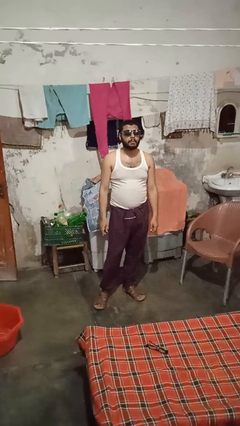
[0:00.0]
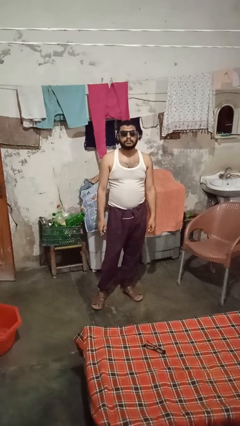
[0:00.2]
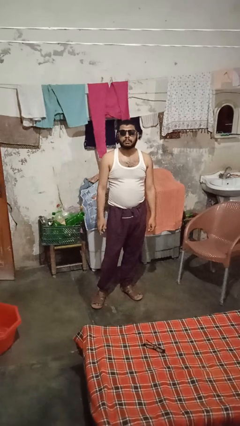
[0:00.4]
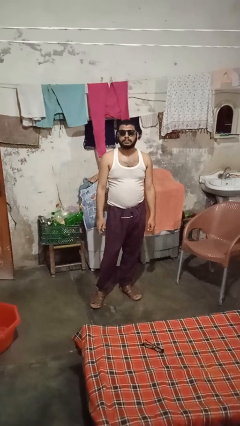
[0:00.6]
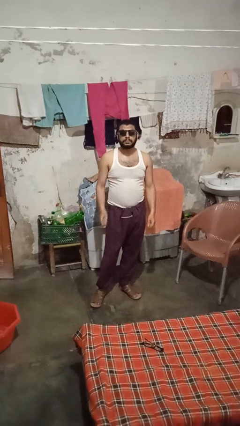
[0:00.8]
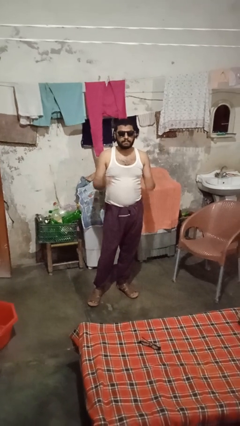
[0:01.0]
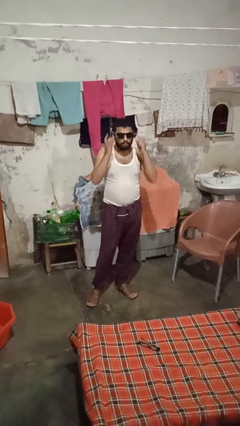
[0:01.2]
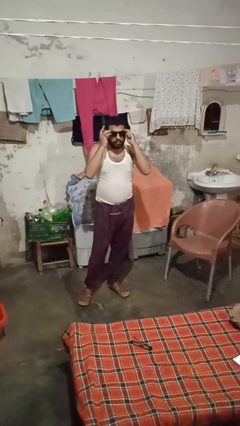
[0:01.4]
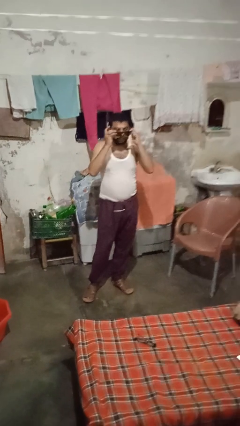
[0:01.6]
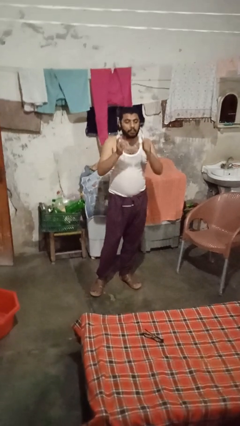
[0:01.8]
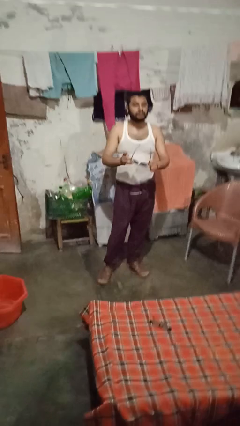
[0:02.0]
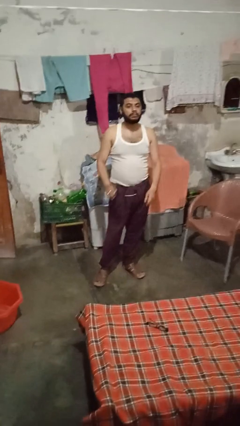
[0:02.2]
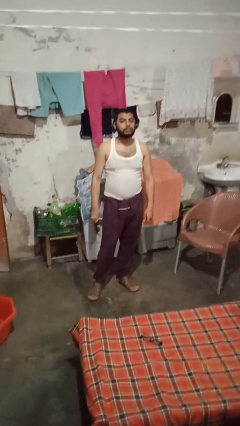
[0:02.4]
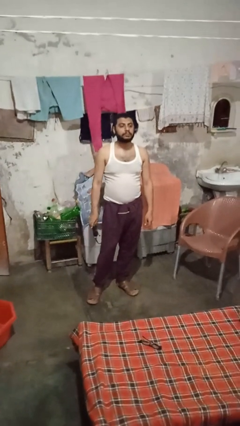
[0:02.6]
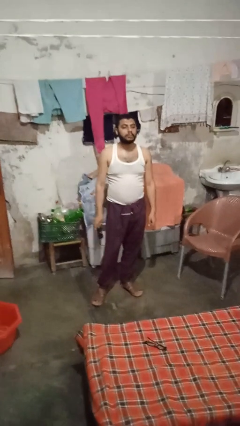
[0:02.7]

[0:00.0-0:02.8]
person takes off sunglasses

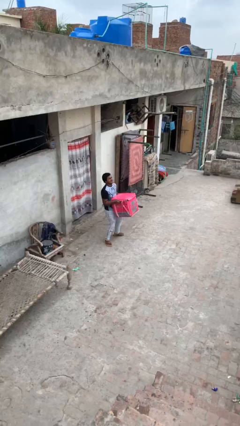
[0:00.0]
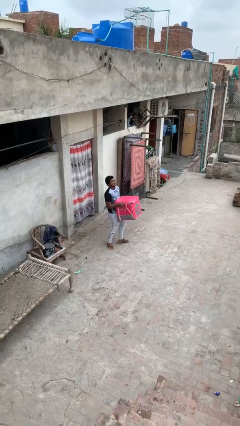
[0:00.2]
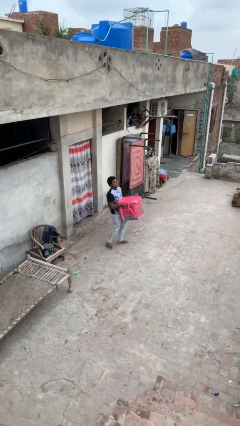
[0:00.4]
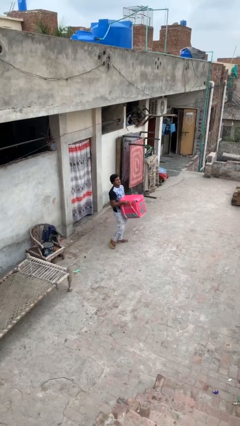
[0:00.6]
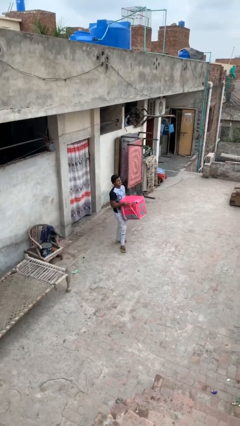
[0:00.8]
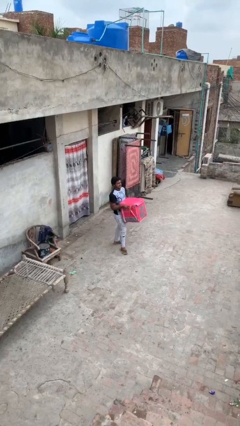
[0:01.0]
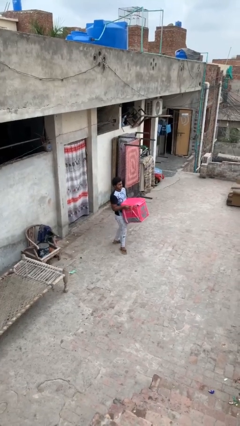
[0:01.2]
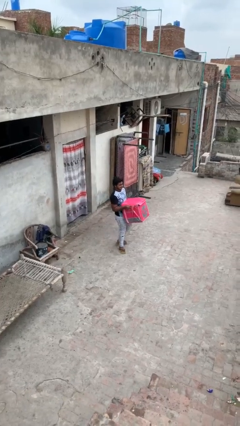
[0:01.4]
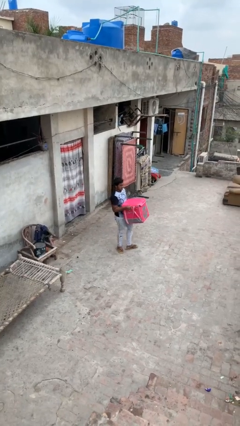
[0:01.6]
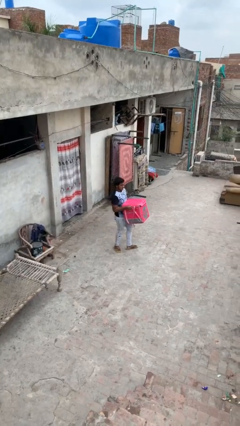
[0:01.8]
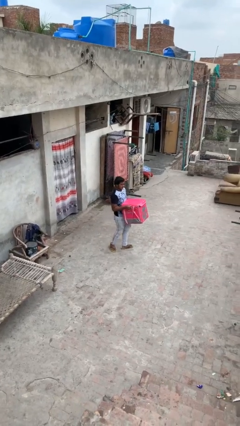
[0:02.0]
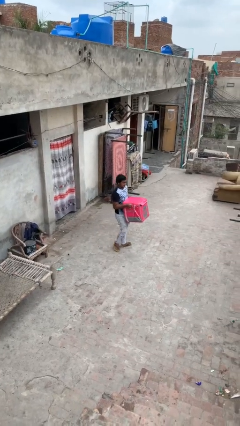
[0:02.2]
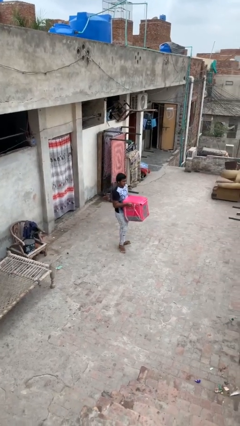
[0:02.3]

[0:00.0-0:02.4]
person carries heavy object

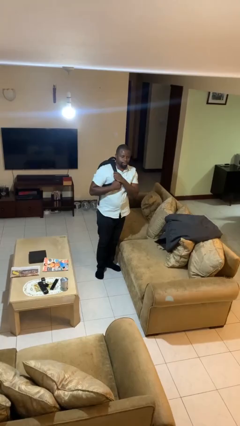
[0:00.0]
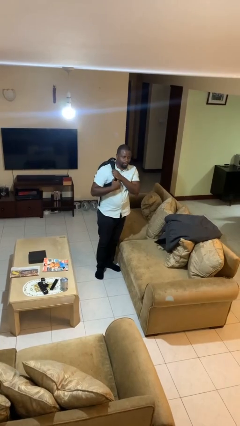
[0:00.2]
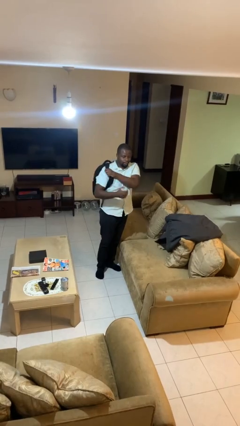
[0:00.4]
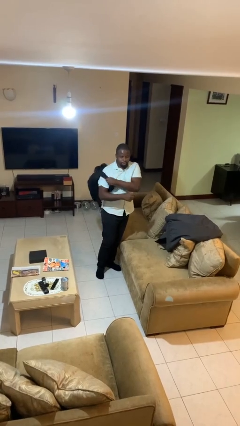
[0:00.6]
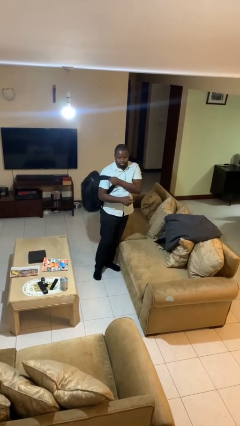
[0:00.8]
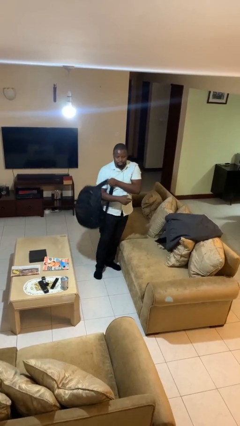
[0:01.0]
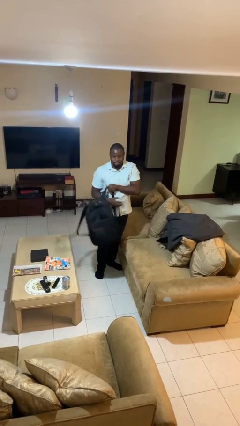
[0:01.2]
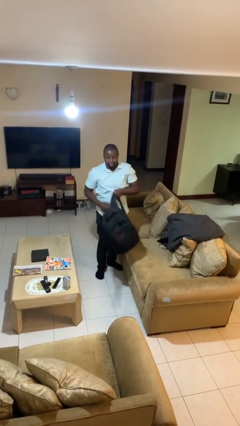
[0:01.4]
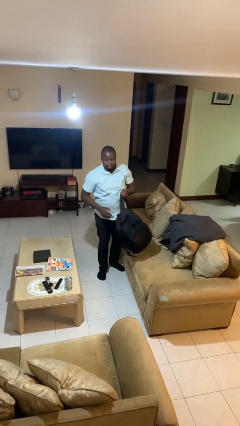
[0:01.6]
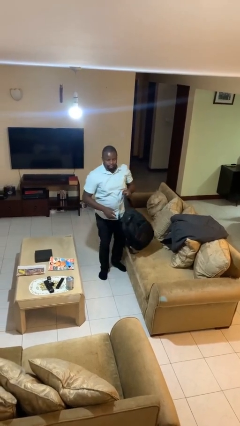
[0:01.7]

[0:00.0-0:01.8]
person takes off backpack

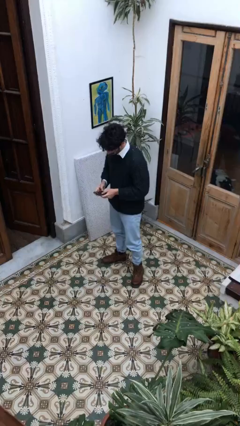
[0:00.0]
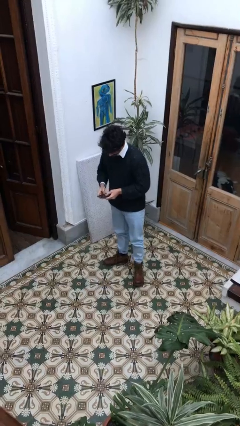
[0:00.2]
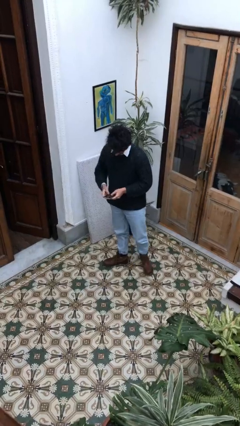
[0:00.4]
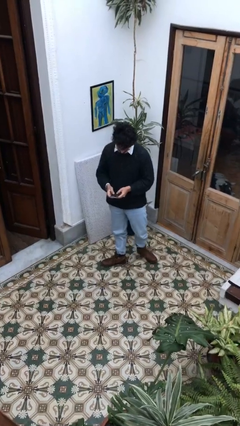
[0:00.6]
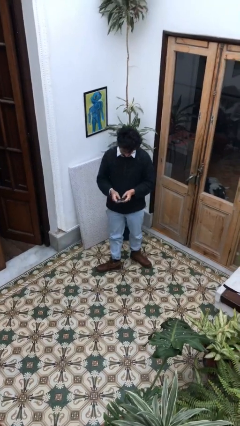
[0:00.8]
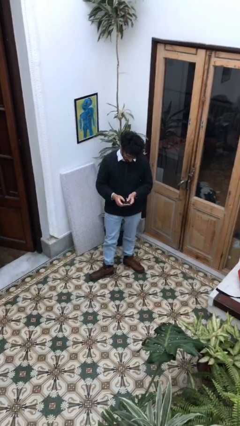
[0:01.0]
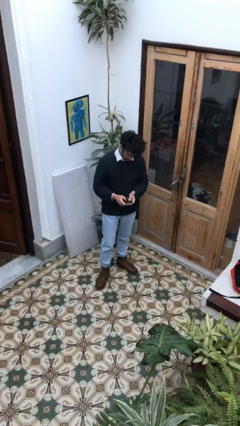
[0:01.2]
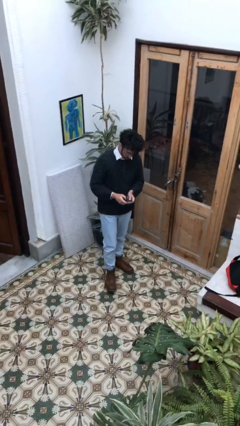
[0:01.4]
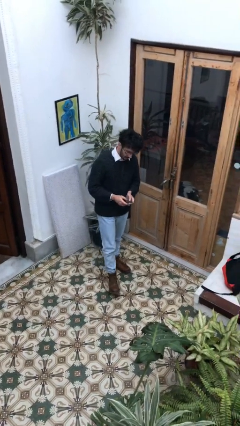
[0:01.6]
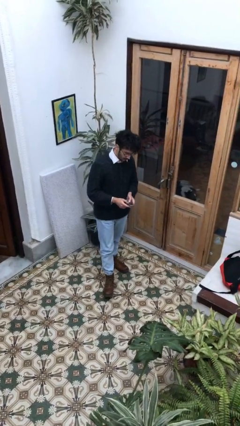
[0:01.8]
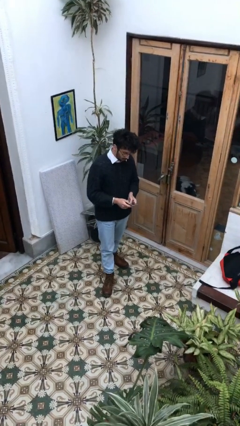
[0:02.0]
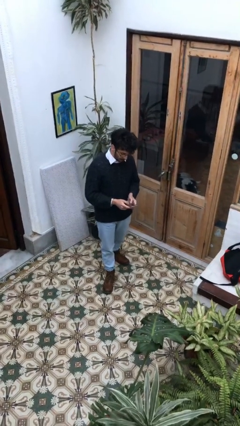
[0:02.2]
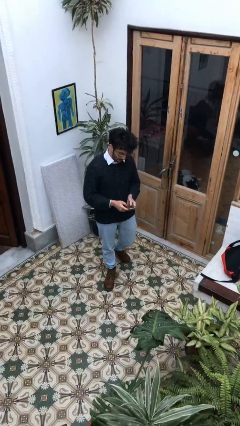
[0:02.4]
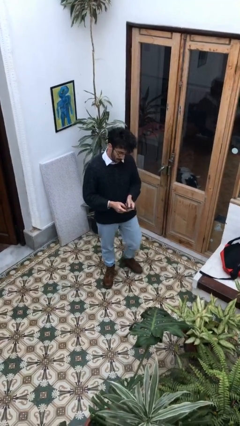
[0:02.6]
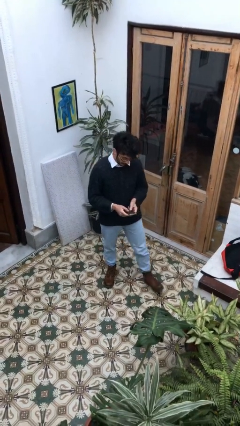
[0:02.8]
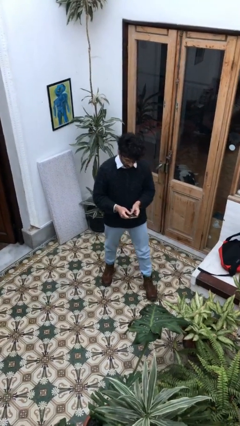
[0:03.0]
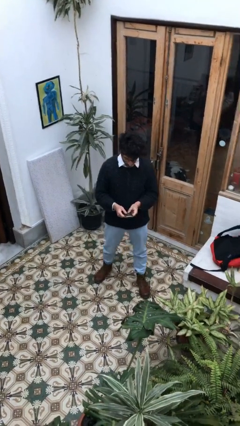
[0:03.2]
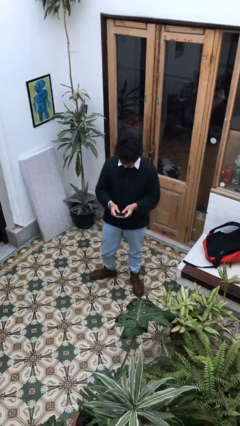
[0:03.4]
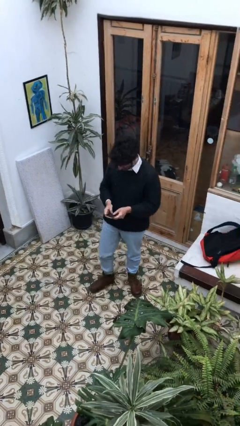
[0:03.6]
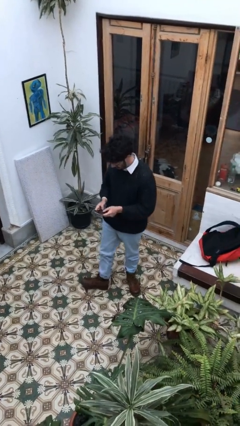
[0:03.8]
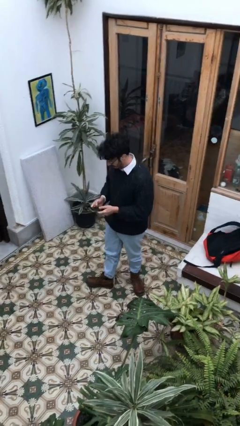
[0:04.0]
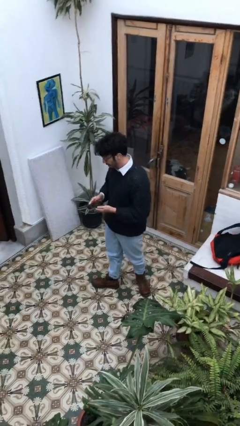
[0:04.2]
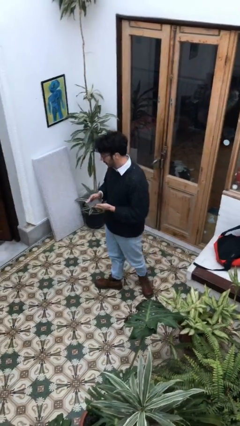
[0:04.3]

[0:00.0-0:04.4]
person texts on phone

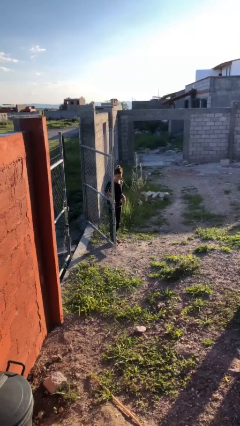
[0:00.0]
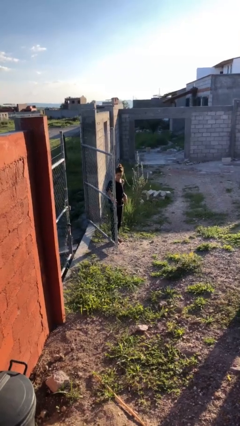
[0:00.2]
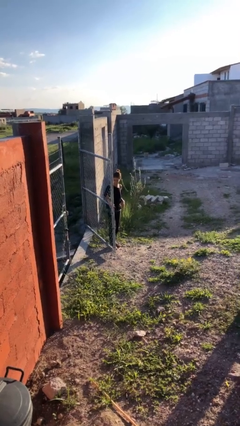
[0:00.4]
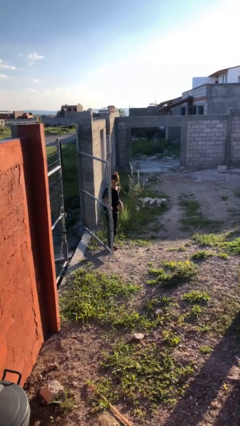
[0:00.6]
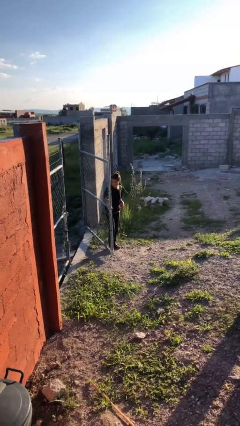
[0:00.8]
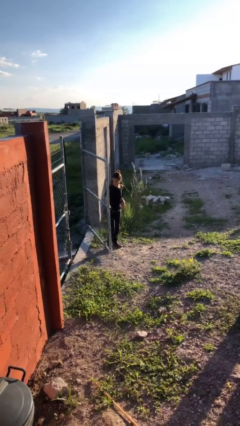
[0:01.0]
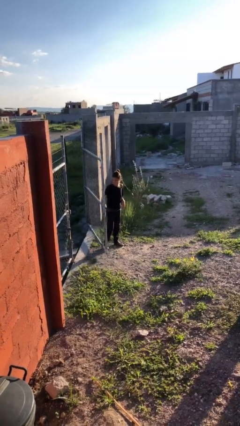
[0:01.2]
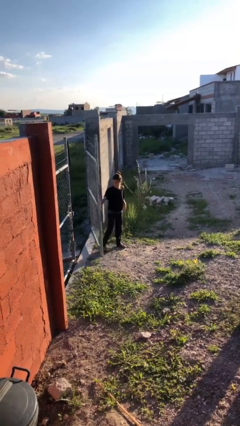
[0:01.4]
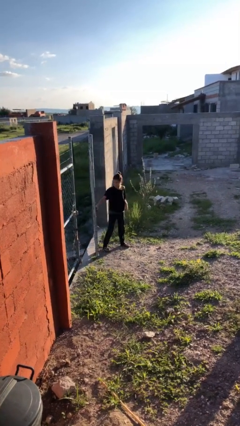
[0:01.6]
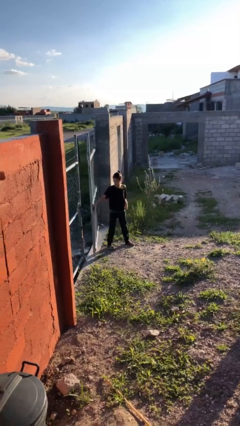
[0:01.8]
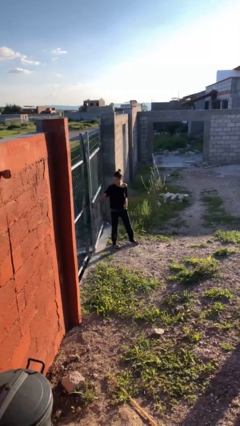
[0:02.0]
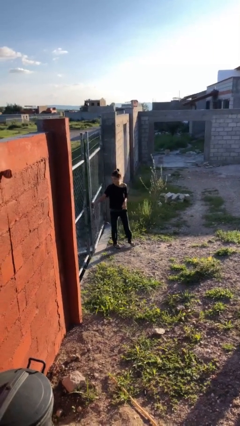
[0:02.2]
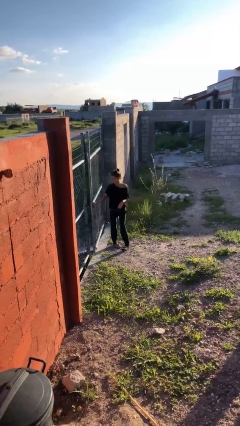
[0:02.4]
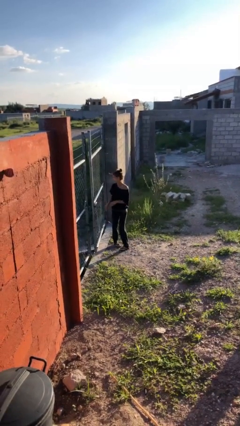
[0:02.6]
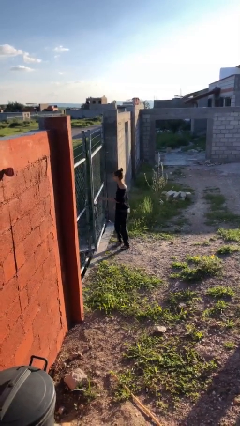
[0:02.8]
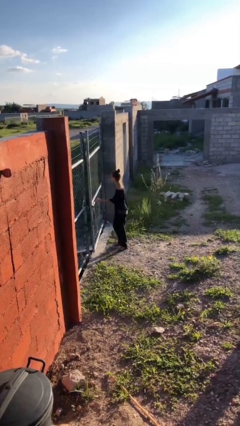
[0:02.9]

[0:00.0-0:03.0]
person closes gate

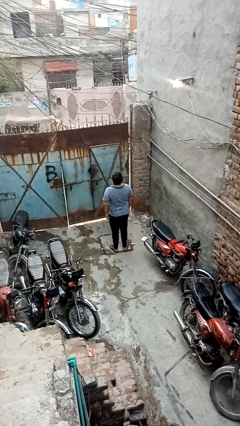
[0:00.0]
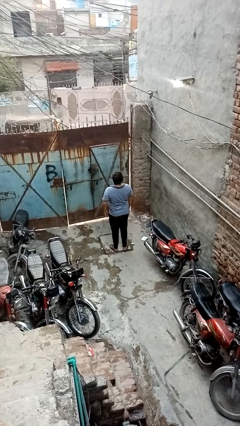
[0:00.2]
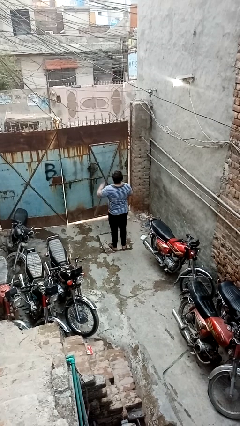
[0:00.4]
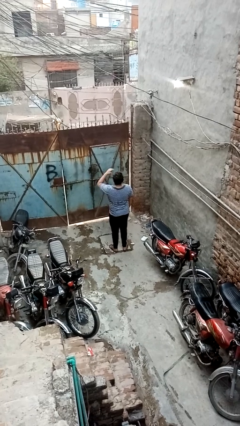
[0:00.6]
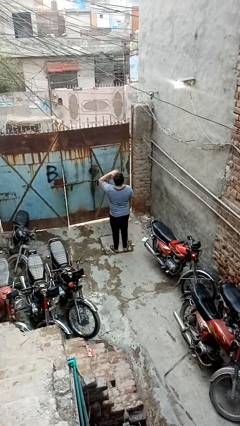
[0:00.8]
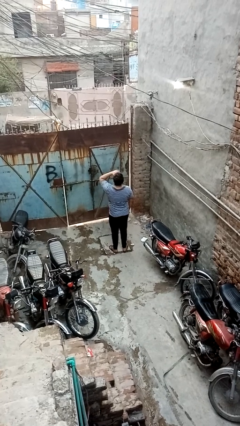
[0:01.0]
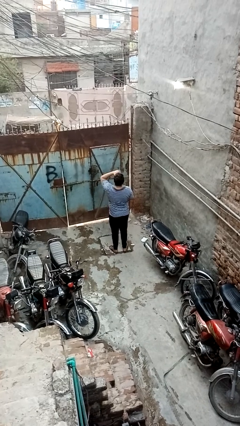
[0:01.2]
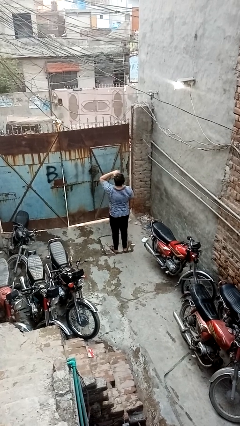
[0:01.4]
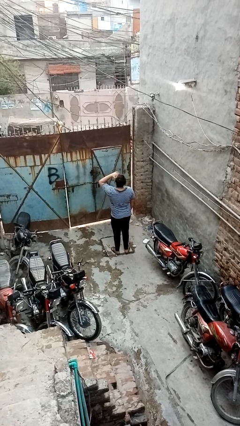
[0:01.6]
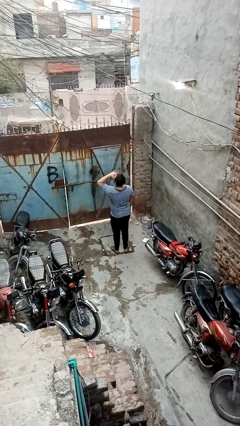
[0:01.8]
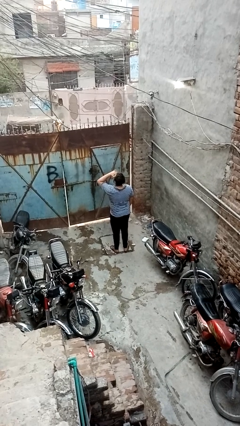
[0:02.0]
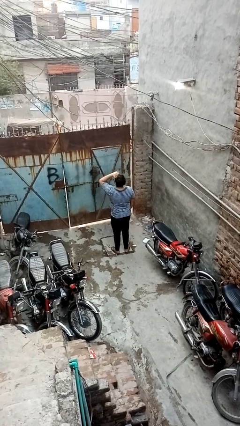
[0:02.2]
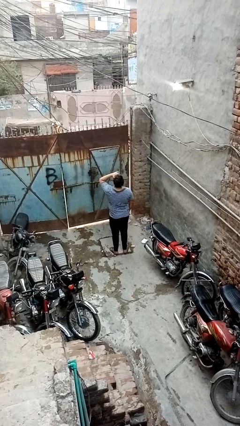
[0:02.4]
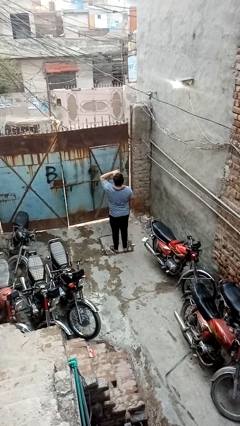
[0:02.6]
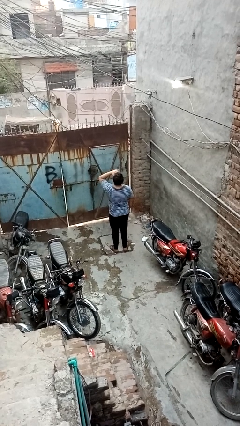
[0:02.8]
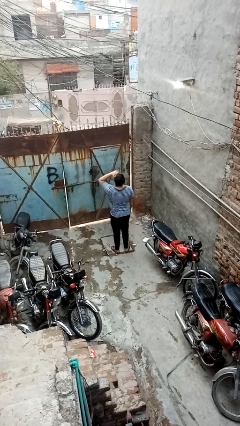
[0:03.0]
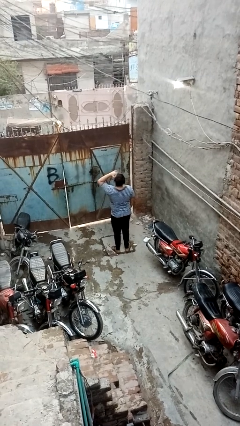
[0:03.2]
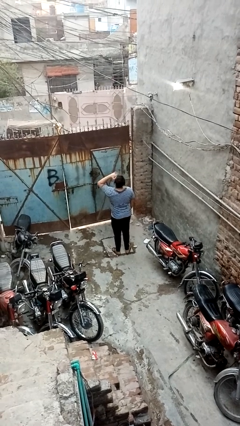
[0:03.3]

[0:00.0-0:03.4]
person shades eyes
